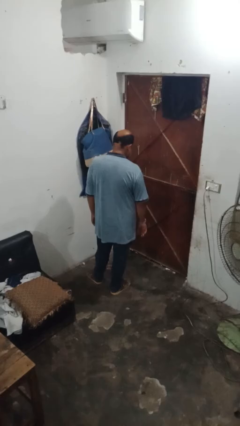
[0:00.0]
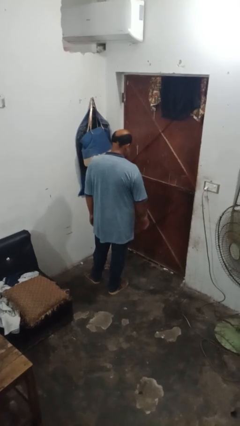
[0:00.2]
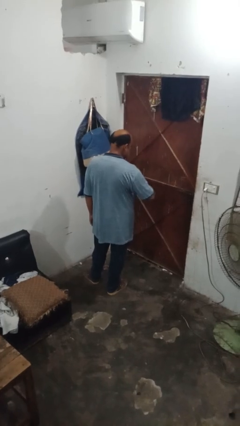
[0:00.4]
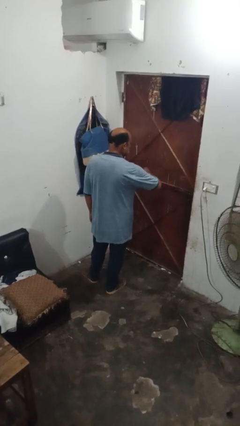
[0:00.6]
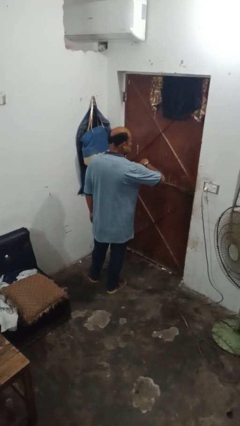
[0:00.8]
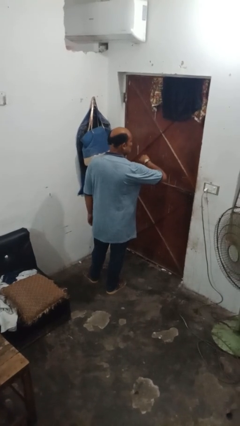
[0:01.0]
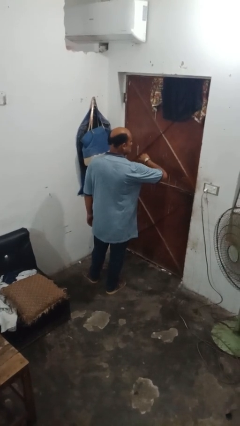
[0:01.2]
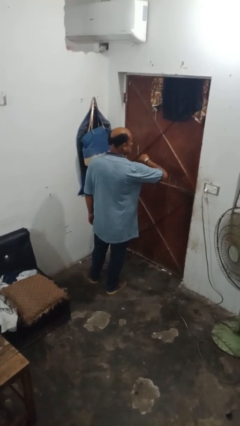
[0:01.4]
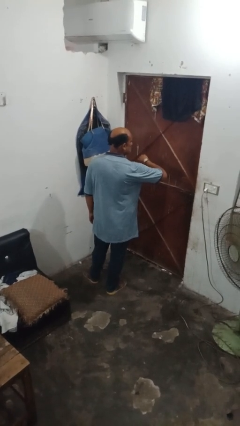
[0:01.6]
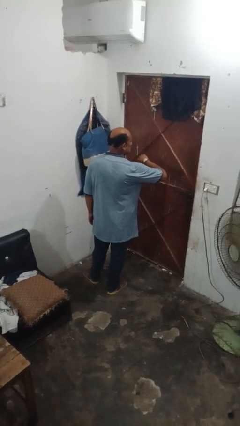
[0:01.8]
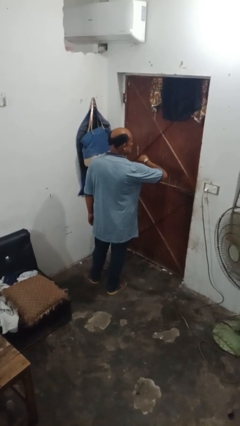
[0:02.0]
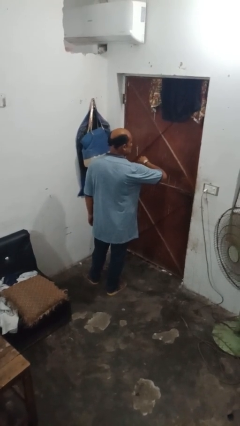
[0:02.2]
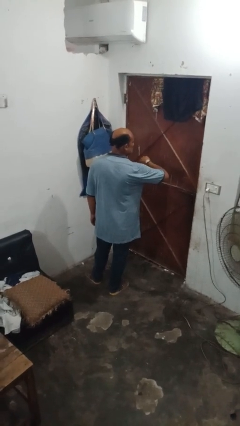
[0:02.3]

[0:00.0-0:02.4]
person looks at wristwatch

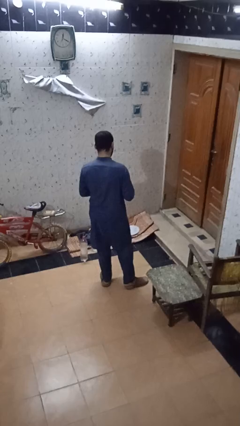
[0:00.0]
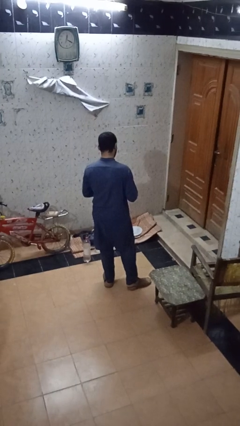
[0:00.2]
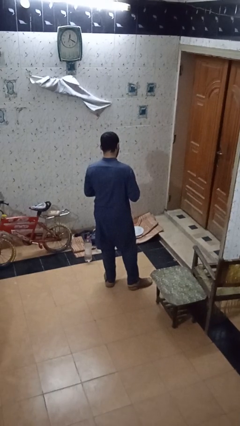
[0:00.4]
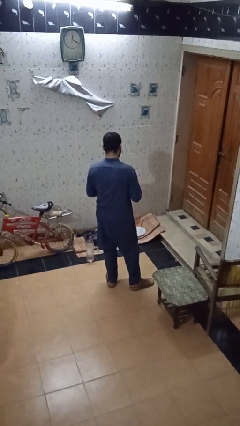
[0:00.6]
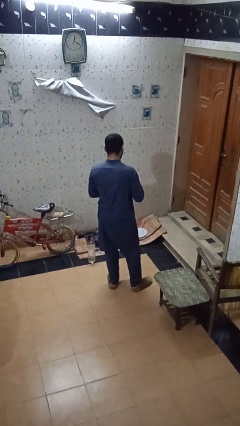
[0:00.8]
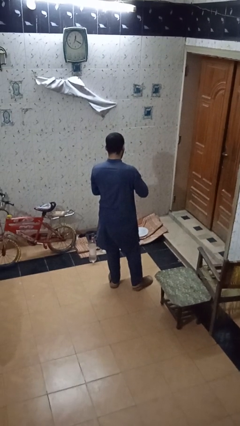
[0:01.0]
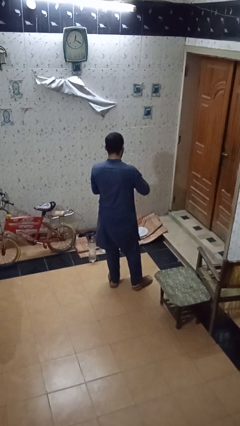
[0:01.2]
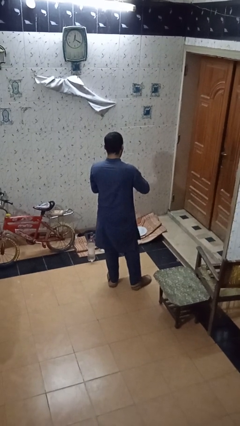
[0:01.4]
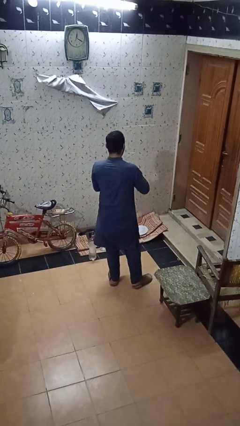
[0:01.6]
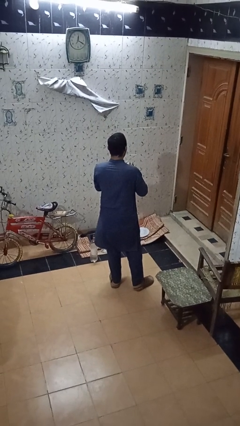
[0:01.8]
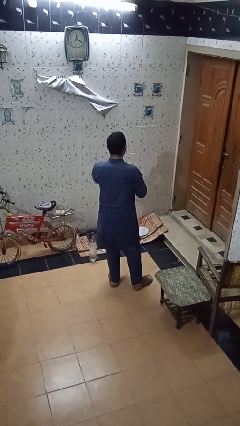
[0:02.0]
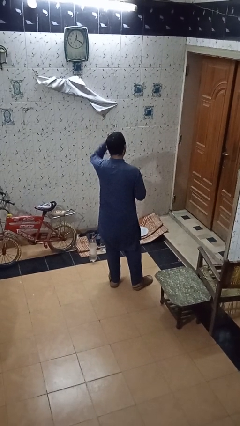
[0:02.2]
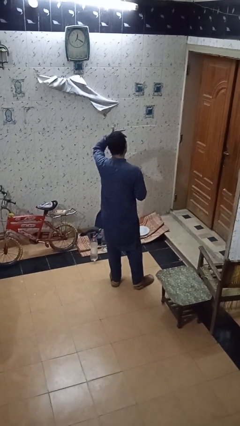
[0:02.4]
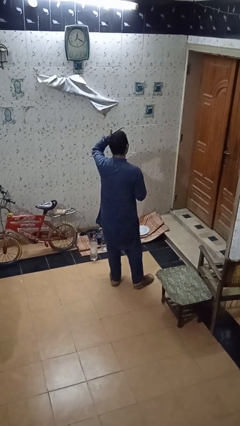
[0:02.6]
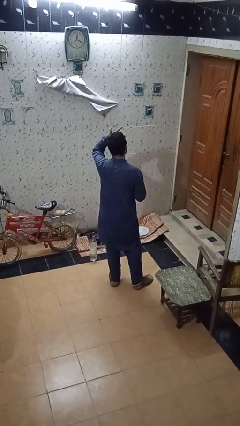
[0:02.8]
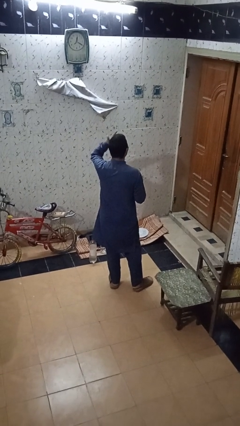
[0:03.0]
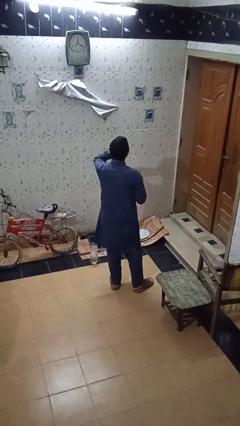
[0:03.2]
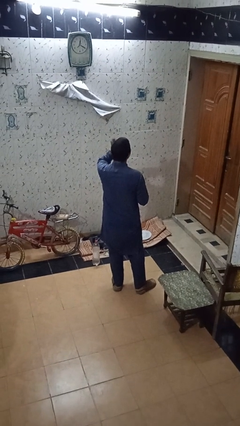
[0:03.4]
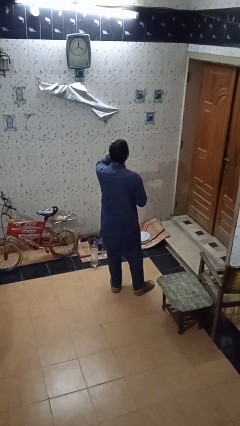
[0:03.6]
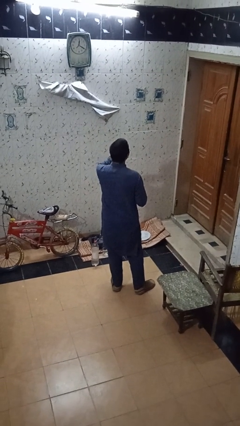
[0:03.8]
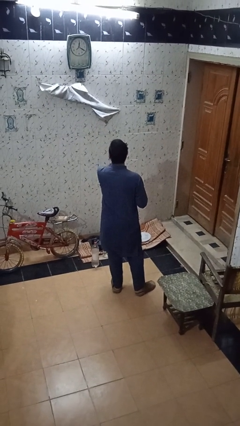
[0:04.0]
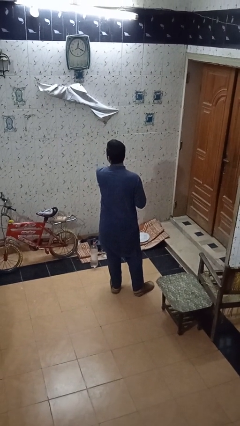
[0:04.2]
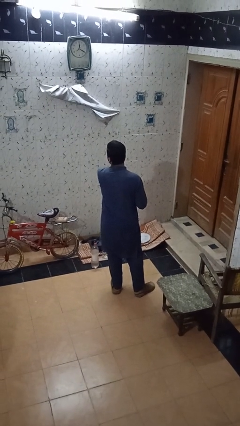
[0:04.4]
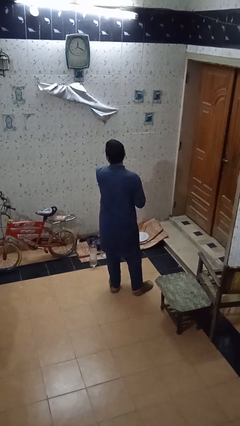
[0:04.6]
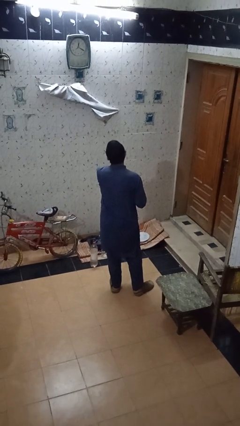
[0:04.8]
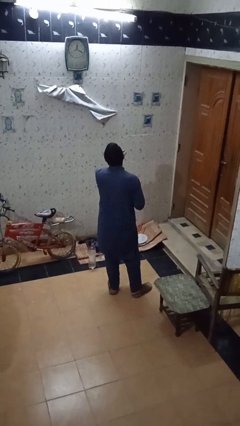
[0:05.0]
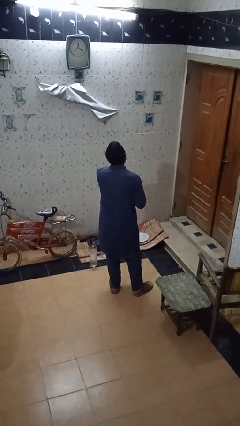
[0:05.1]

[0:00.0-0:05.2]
person applies sunscreen

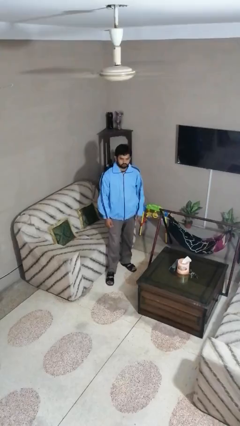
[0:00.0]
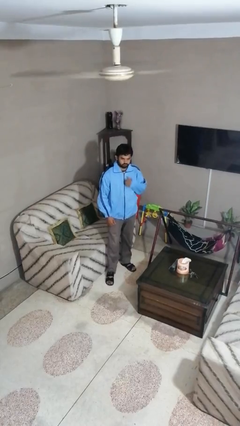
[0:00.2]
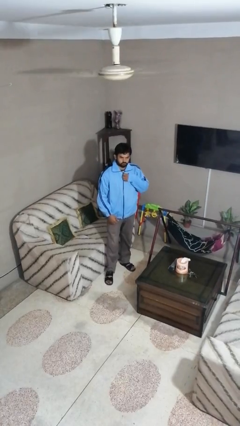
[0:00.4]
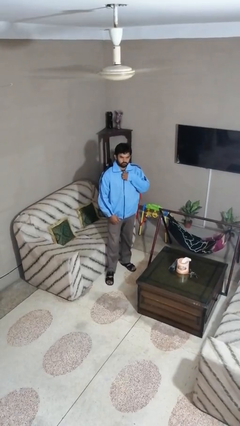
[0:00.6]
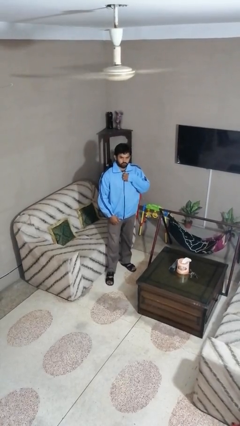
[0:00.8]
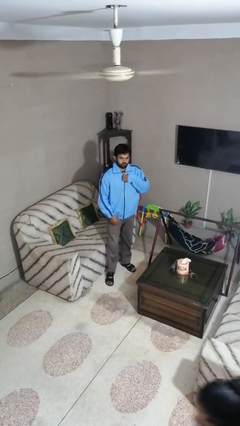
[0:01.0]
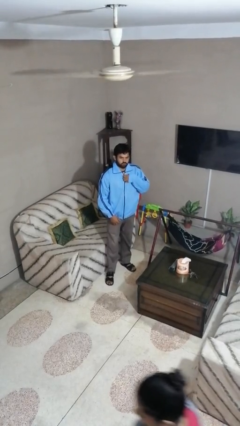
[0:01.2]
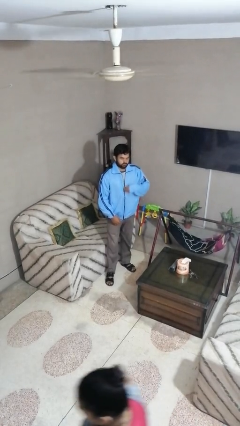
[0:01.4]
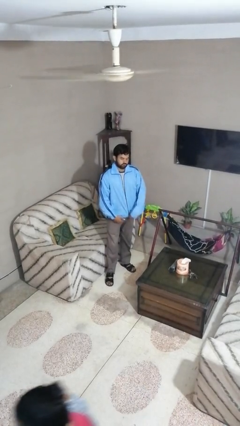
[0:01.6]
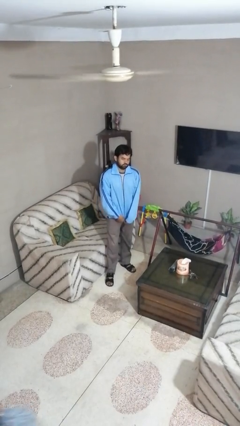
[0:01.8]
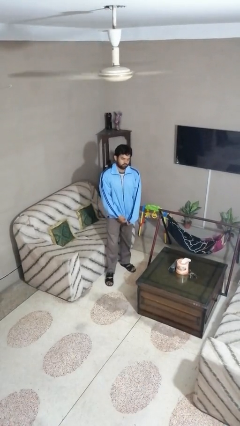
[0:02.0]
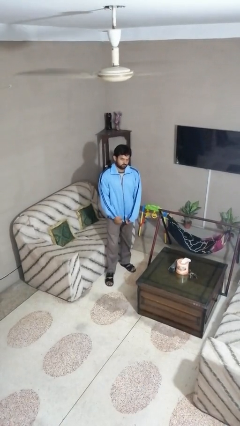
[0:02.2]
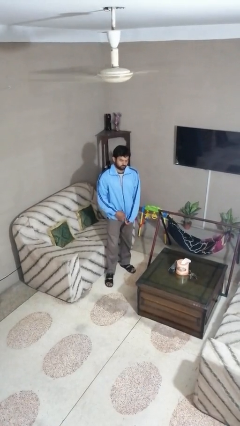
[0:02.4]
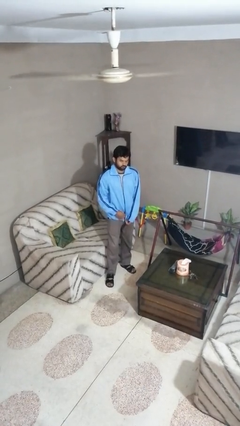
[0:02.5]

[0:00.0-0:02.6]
person unzips jacket

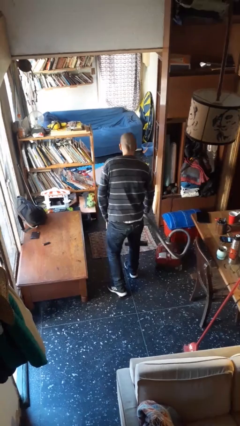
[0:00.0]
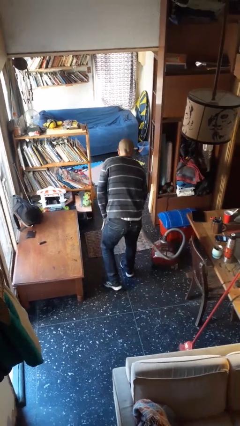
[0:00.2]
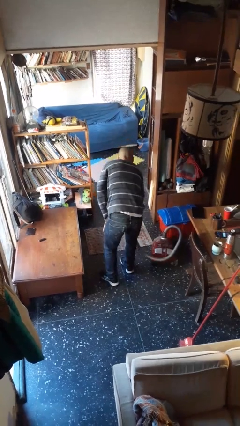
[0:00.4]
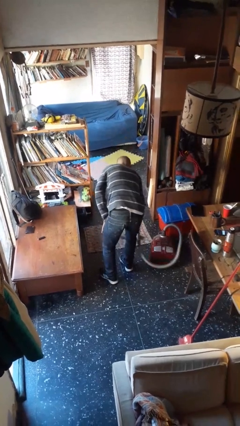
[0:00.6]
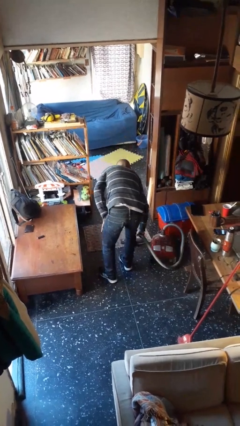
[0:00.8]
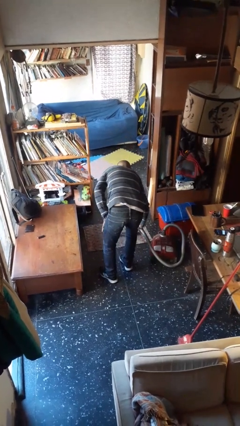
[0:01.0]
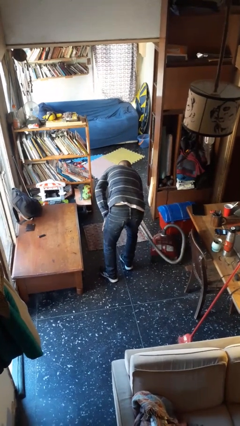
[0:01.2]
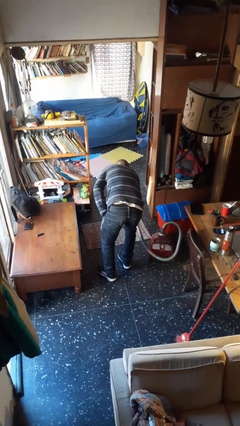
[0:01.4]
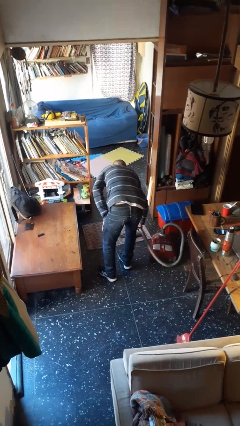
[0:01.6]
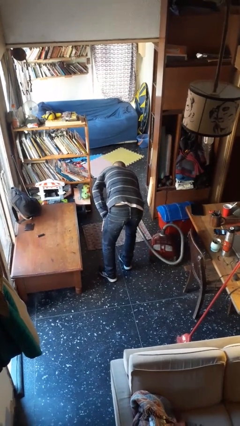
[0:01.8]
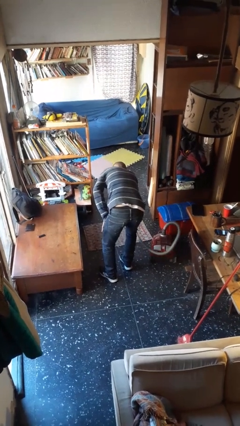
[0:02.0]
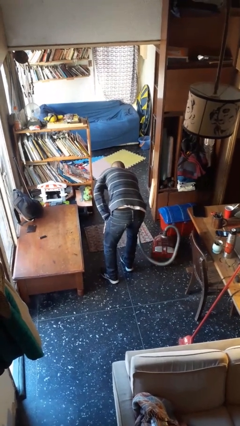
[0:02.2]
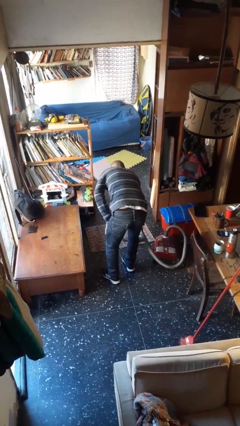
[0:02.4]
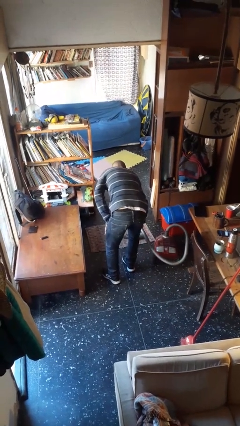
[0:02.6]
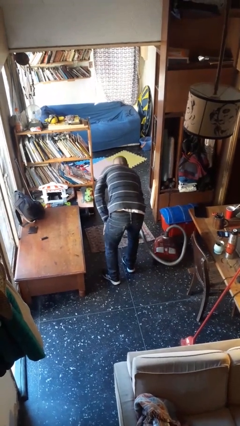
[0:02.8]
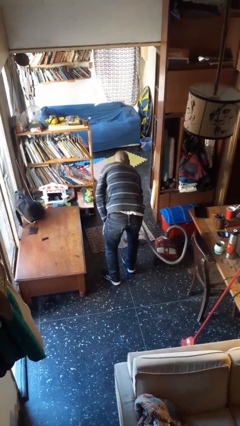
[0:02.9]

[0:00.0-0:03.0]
person vacuums carpet

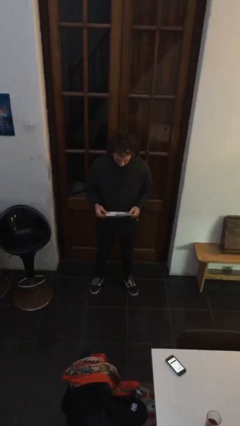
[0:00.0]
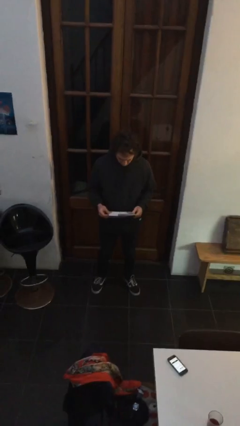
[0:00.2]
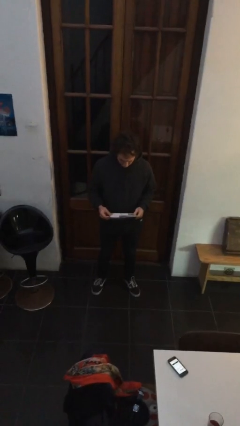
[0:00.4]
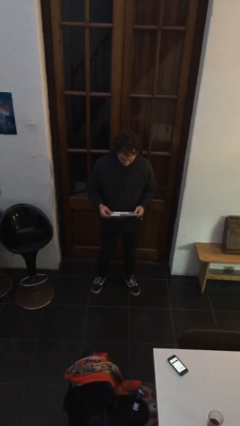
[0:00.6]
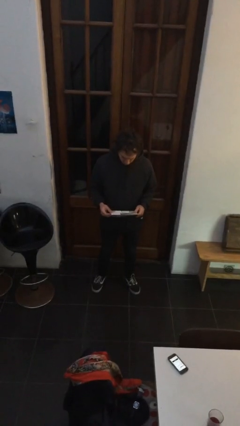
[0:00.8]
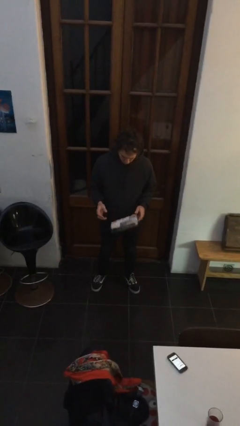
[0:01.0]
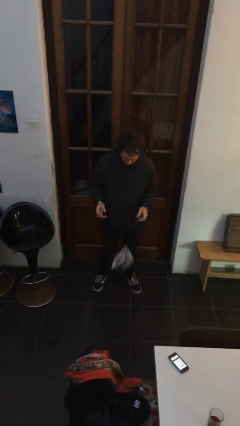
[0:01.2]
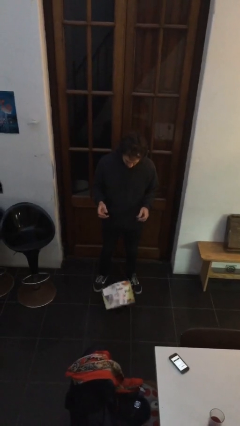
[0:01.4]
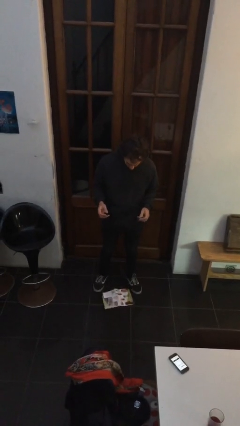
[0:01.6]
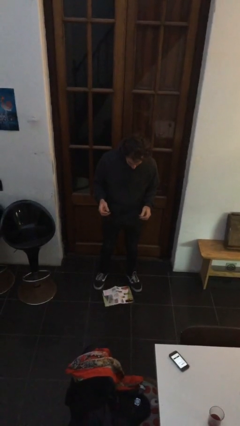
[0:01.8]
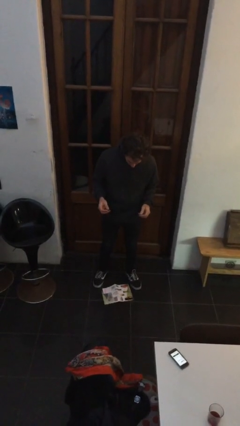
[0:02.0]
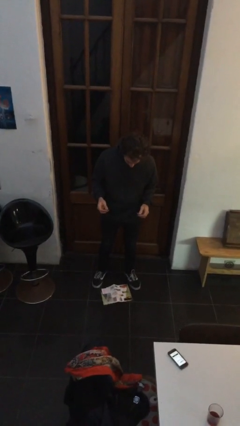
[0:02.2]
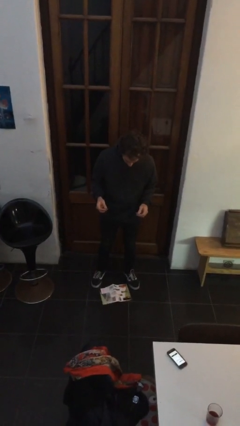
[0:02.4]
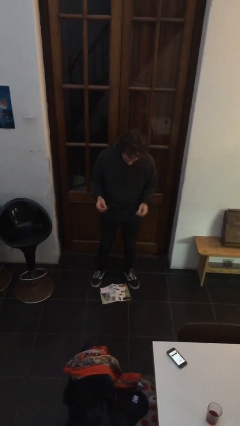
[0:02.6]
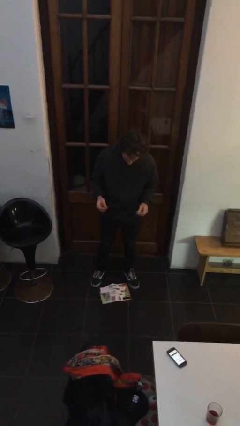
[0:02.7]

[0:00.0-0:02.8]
person drops object

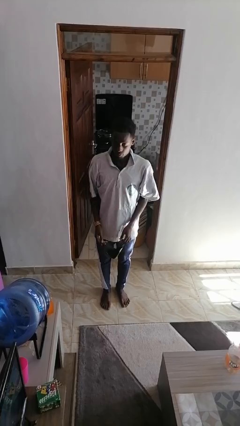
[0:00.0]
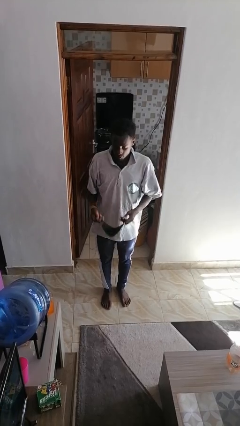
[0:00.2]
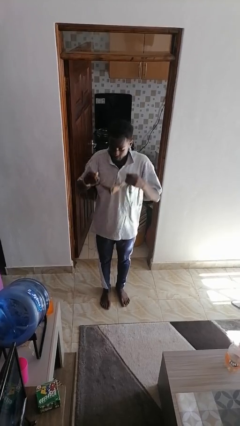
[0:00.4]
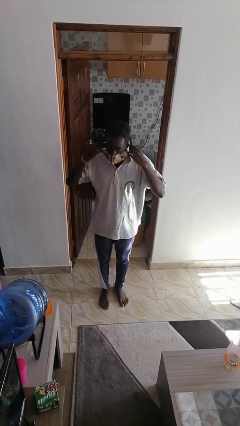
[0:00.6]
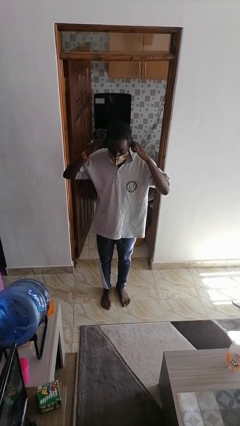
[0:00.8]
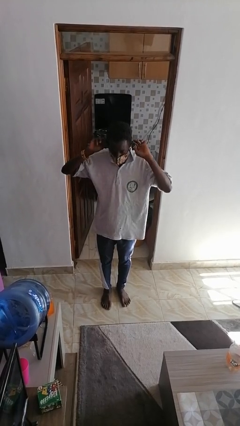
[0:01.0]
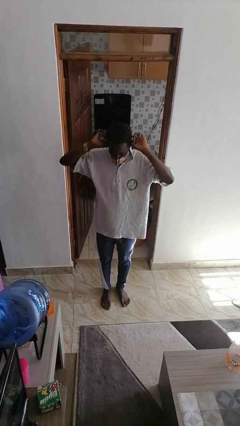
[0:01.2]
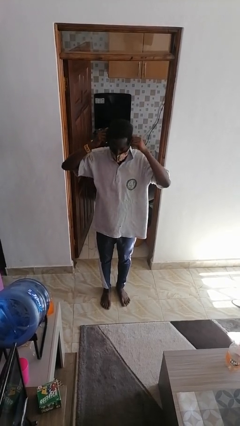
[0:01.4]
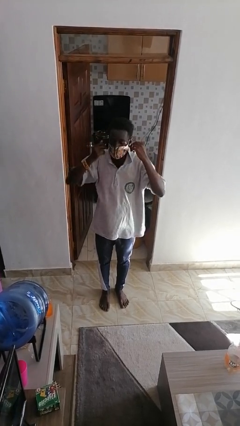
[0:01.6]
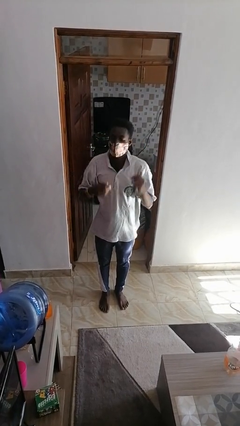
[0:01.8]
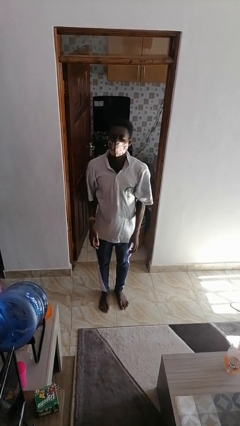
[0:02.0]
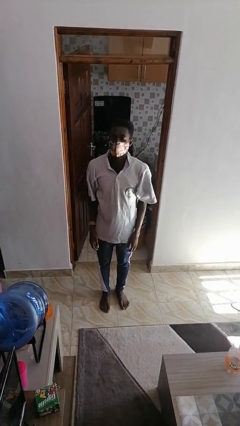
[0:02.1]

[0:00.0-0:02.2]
person puts on facemask
